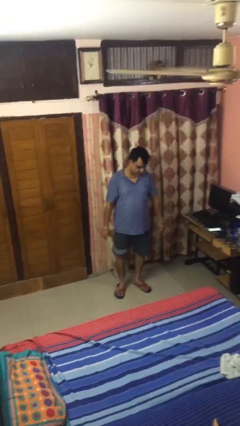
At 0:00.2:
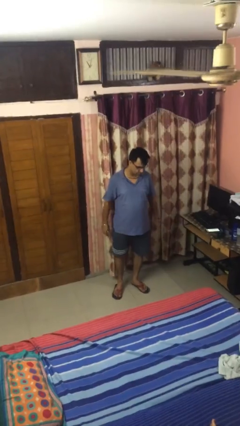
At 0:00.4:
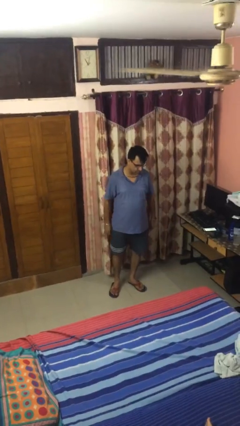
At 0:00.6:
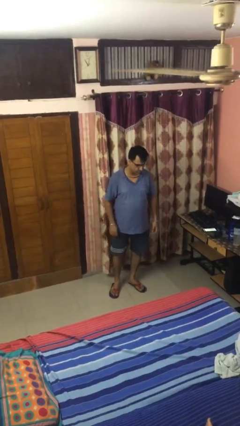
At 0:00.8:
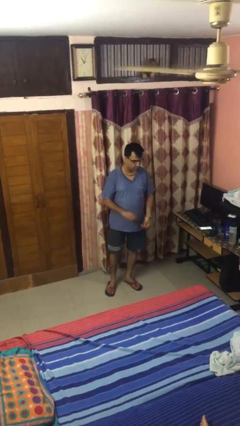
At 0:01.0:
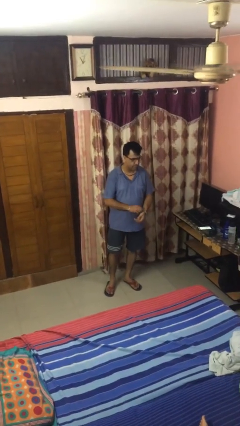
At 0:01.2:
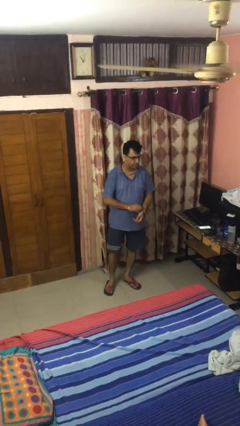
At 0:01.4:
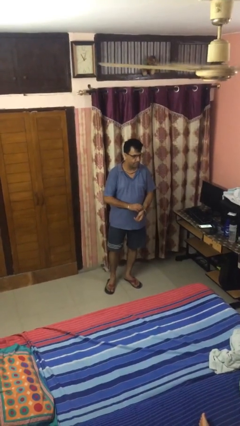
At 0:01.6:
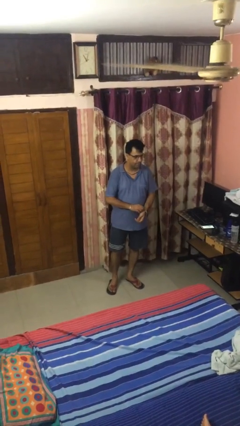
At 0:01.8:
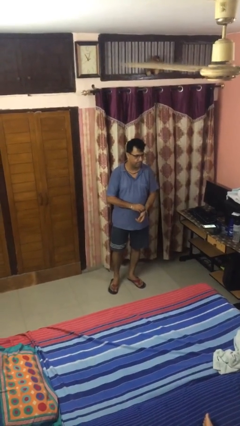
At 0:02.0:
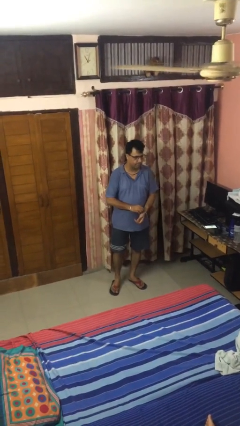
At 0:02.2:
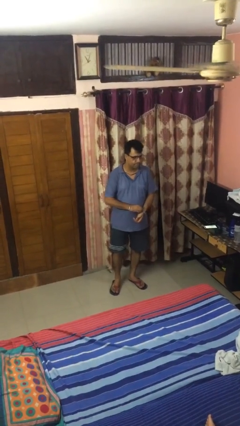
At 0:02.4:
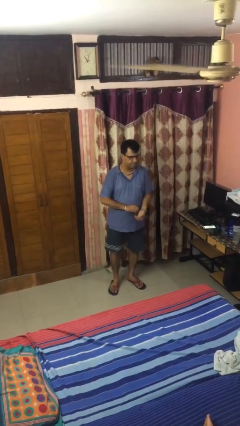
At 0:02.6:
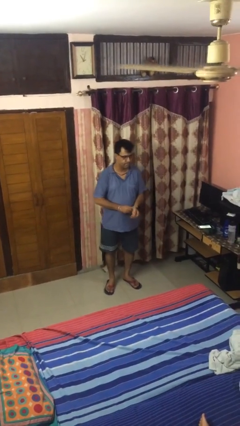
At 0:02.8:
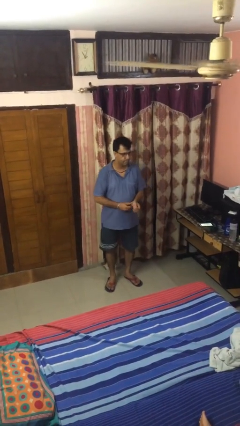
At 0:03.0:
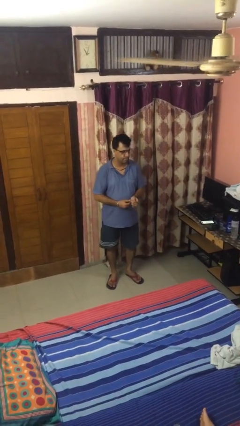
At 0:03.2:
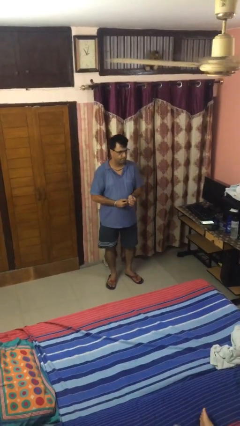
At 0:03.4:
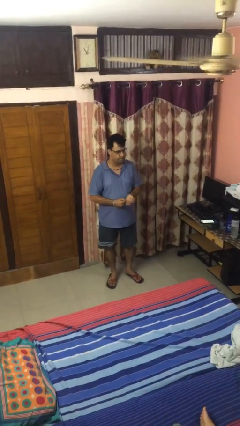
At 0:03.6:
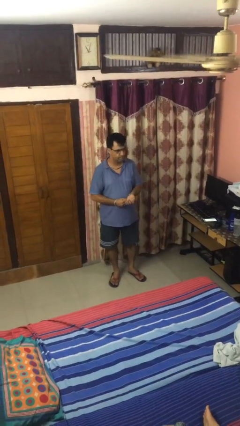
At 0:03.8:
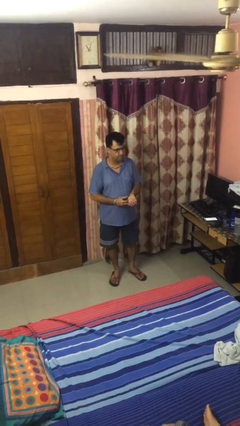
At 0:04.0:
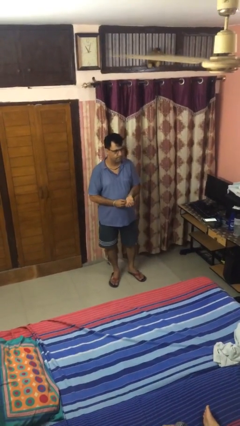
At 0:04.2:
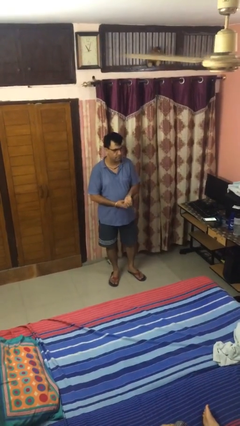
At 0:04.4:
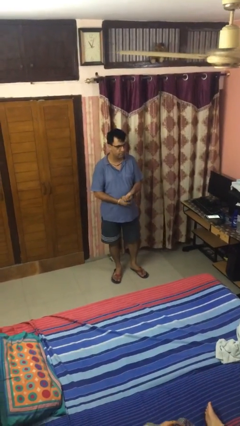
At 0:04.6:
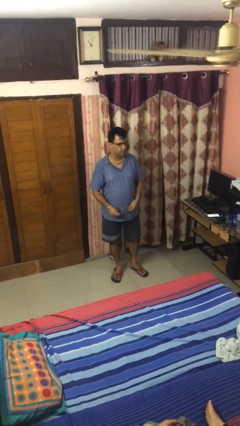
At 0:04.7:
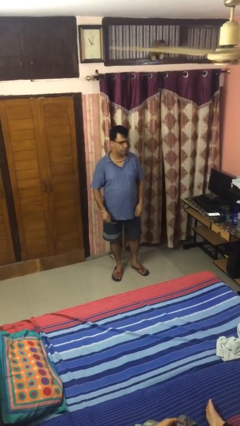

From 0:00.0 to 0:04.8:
person takes off wristwatch

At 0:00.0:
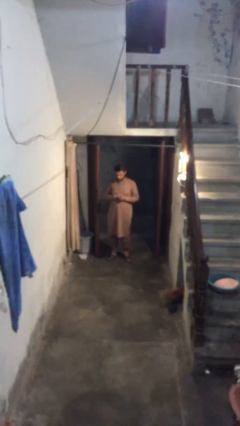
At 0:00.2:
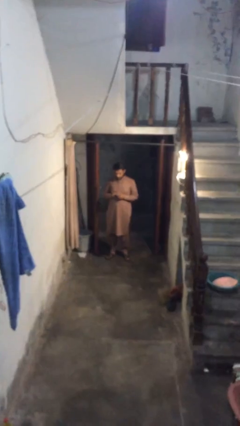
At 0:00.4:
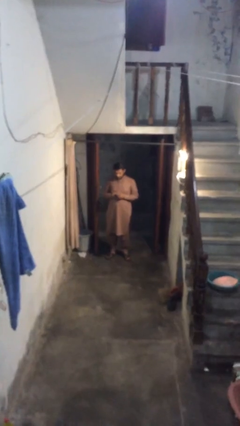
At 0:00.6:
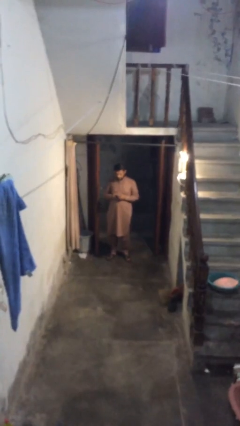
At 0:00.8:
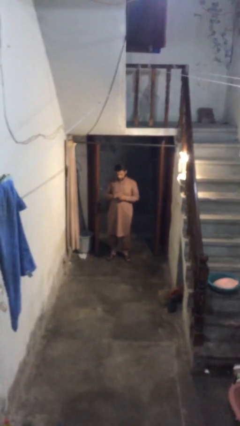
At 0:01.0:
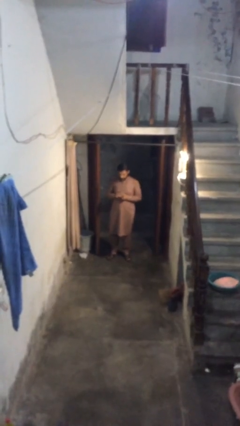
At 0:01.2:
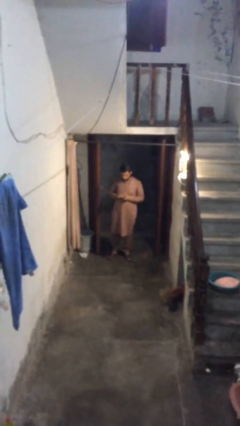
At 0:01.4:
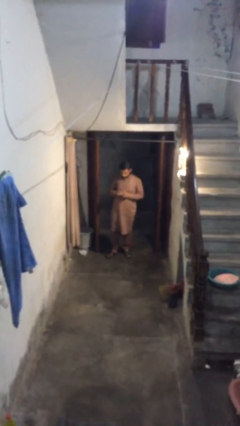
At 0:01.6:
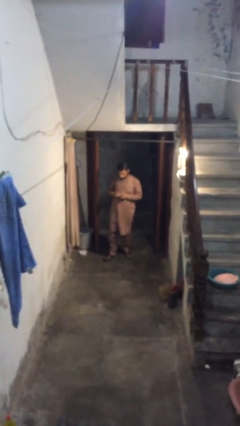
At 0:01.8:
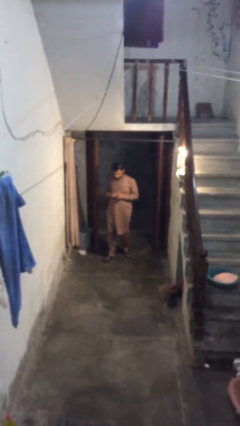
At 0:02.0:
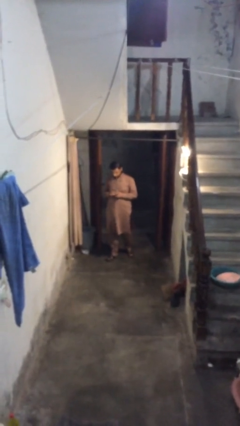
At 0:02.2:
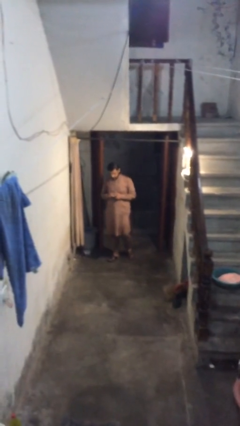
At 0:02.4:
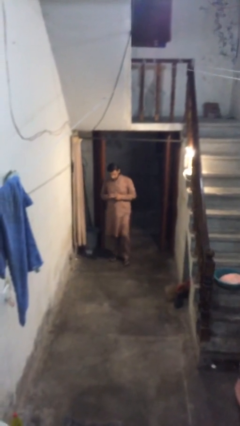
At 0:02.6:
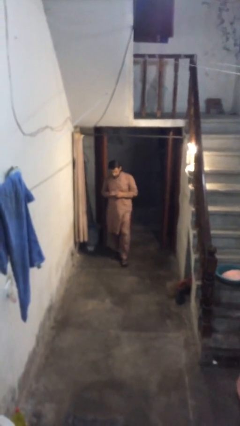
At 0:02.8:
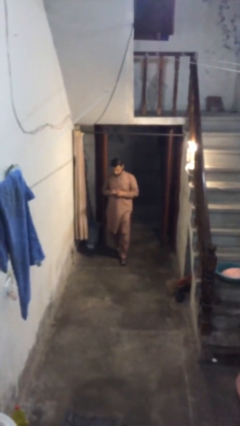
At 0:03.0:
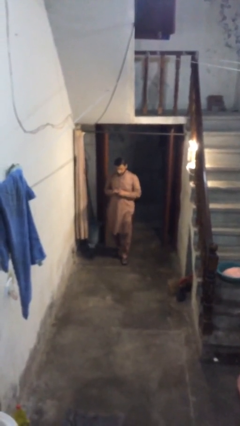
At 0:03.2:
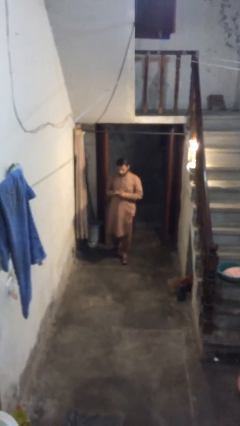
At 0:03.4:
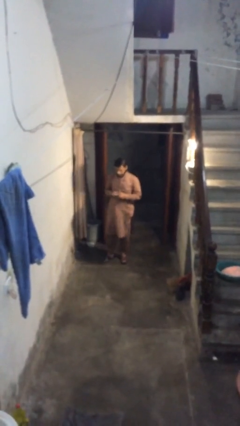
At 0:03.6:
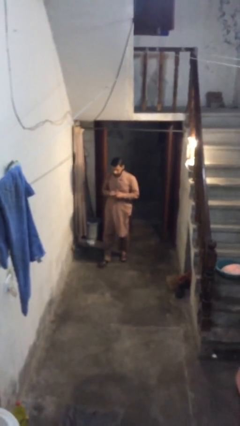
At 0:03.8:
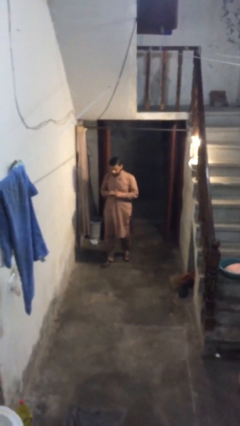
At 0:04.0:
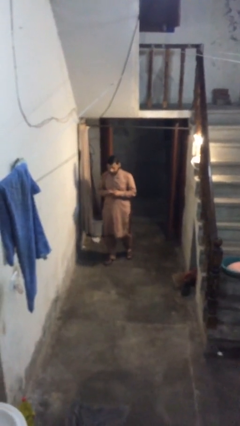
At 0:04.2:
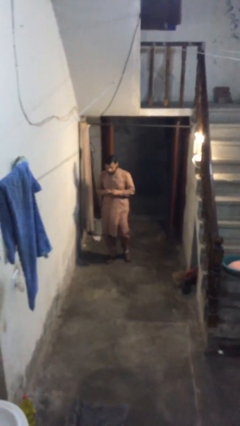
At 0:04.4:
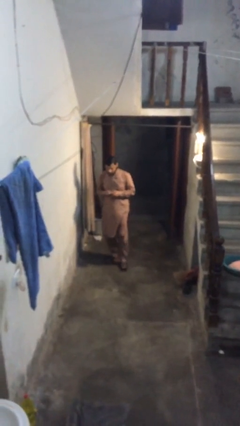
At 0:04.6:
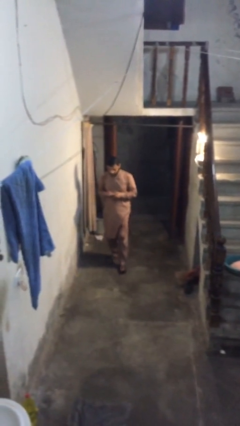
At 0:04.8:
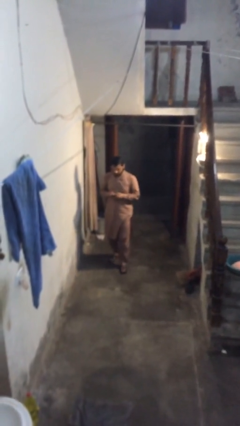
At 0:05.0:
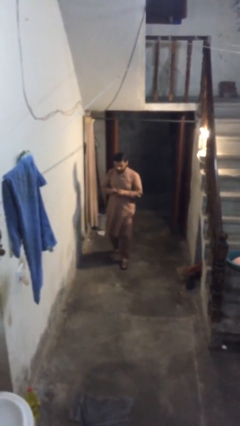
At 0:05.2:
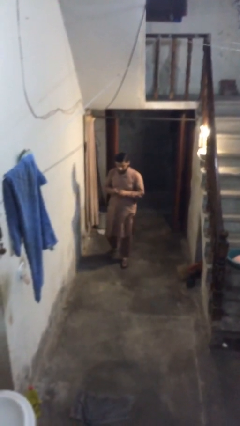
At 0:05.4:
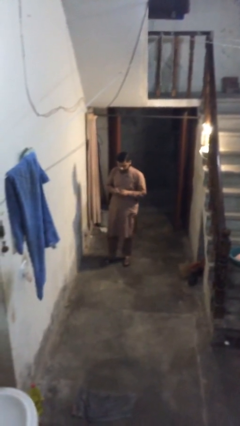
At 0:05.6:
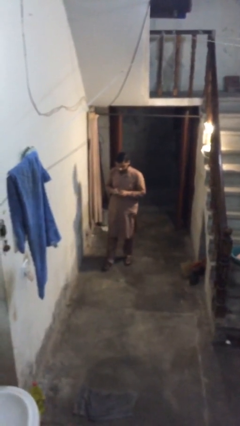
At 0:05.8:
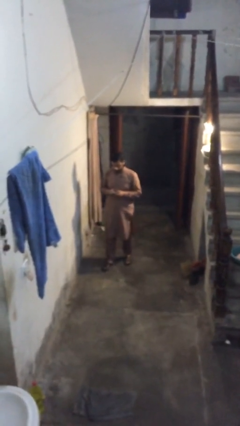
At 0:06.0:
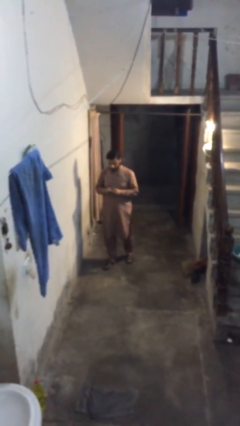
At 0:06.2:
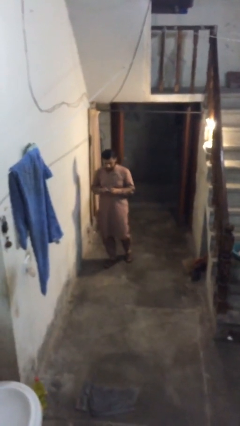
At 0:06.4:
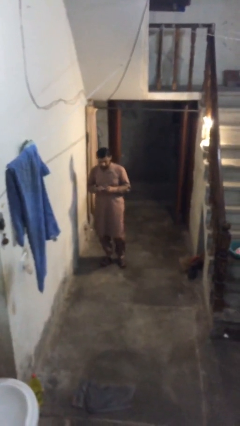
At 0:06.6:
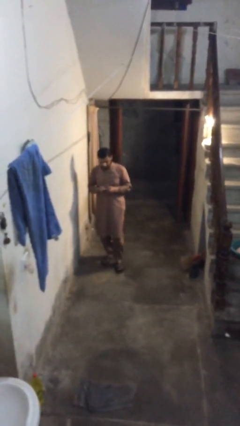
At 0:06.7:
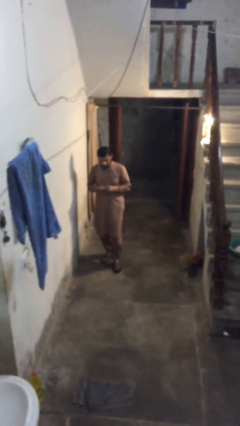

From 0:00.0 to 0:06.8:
person texts on phone

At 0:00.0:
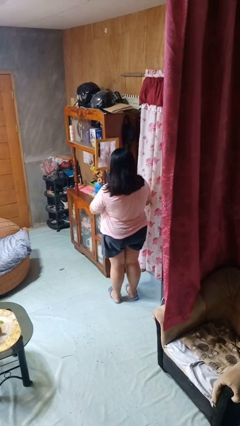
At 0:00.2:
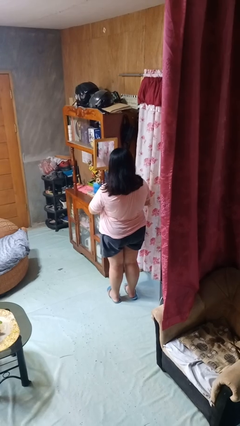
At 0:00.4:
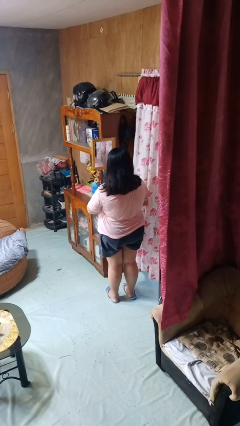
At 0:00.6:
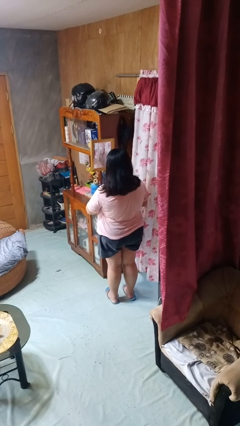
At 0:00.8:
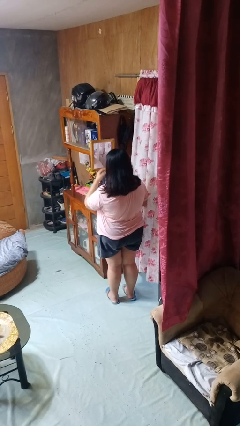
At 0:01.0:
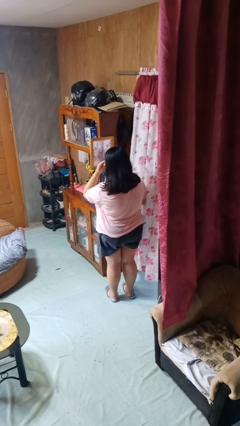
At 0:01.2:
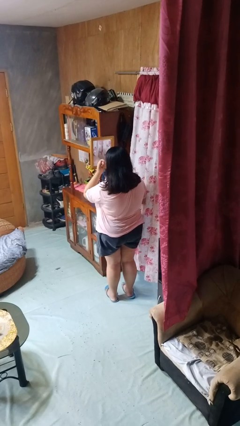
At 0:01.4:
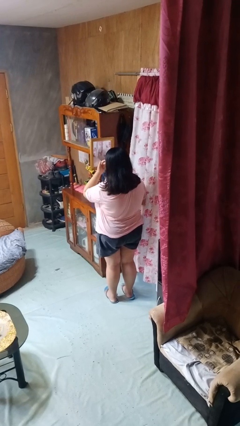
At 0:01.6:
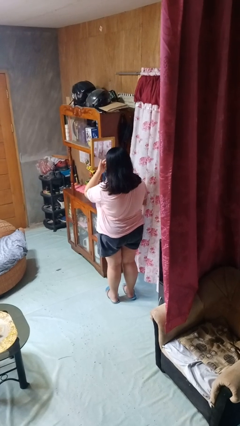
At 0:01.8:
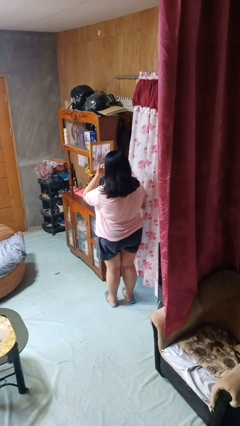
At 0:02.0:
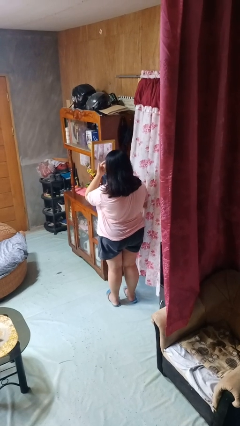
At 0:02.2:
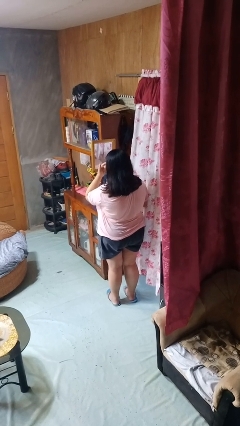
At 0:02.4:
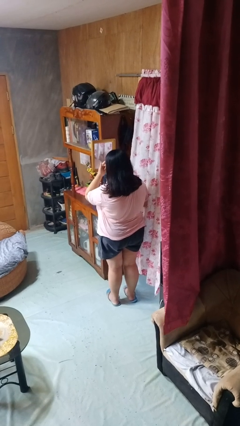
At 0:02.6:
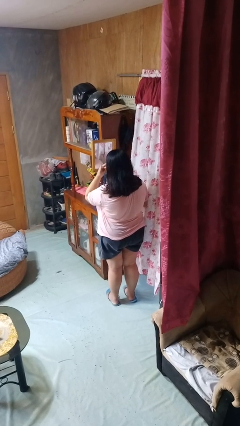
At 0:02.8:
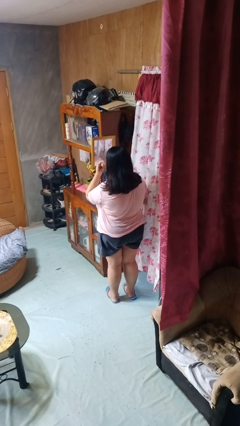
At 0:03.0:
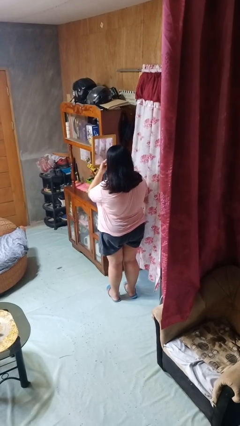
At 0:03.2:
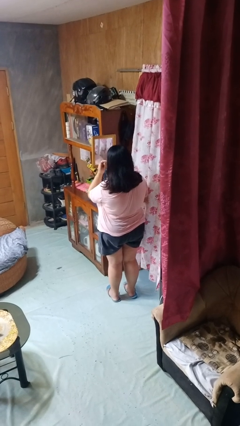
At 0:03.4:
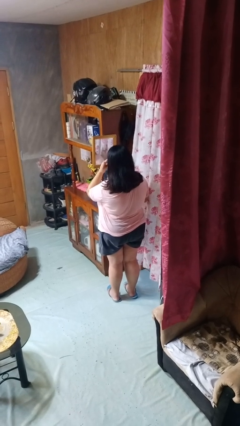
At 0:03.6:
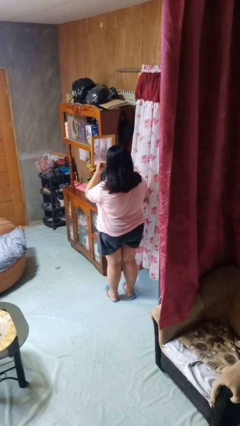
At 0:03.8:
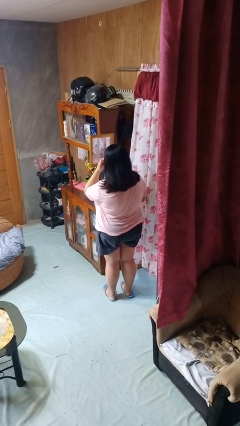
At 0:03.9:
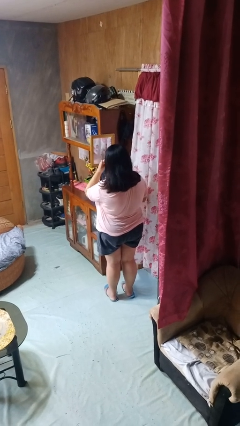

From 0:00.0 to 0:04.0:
person applies eye makeup

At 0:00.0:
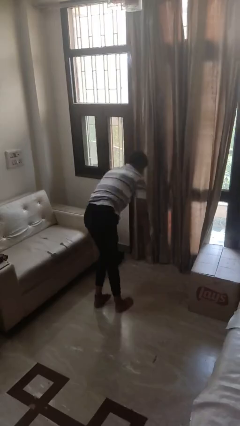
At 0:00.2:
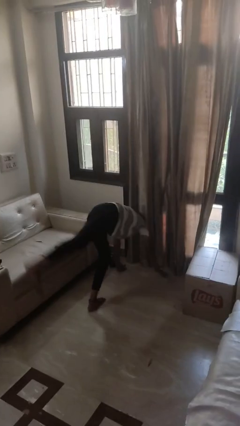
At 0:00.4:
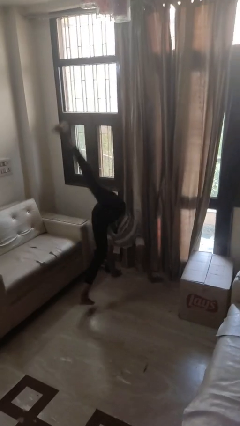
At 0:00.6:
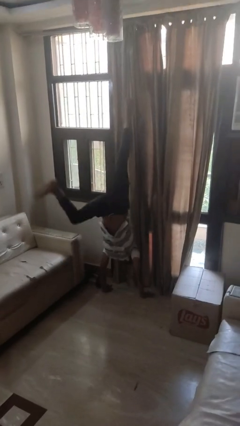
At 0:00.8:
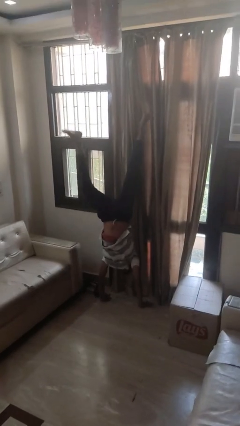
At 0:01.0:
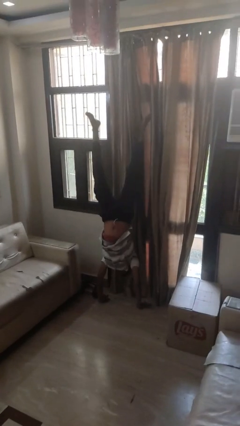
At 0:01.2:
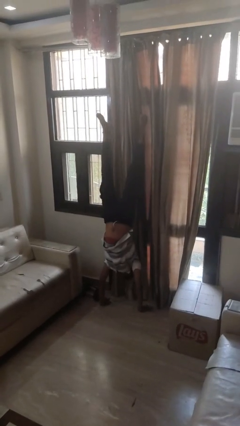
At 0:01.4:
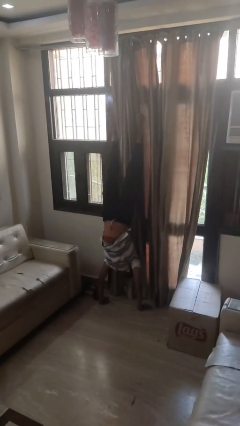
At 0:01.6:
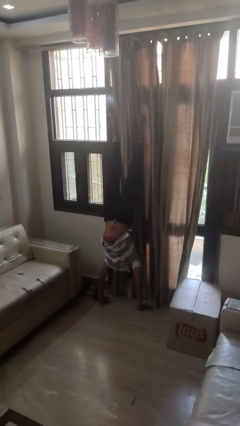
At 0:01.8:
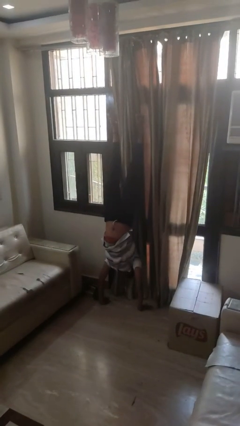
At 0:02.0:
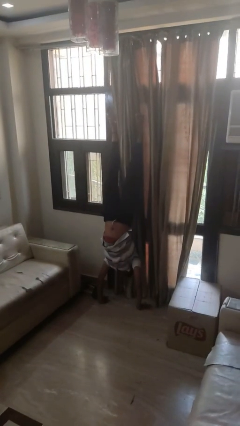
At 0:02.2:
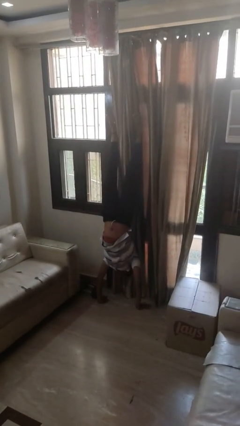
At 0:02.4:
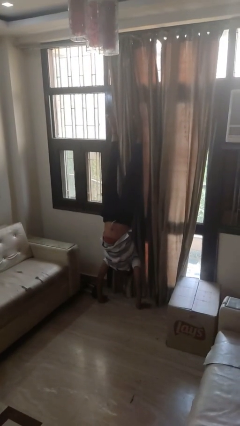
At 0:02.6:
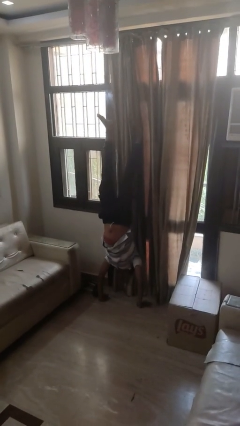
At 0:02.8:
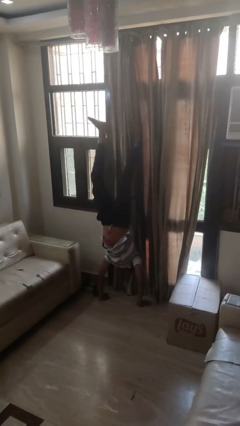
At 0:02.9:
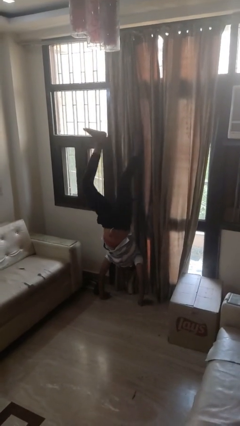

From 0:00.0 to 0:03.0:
person handstand
